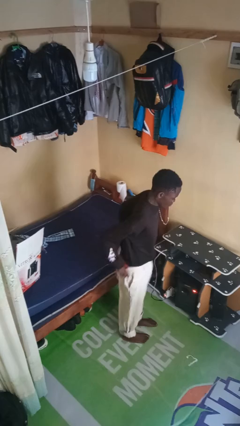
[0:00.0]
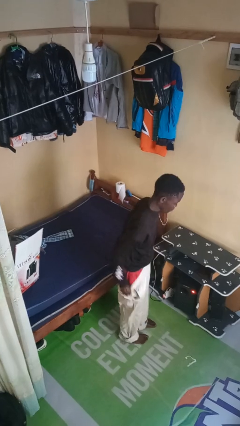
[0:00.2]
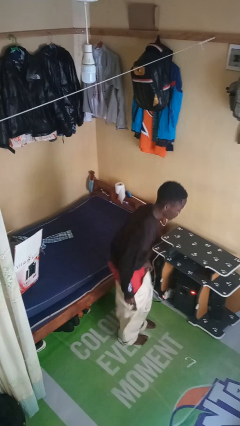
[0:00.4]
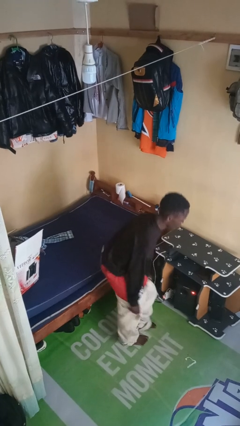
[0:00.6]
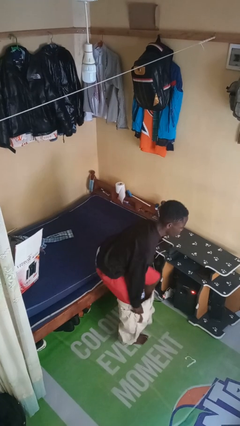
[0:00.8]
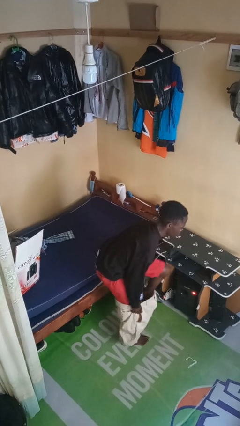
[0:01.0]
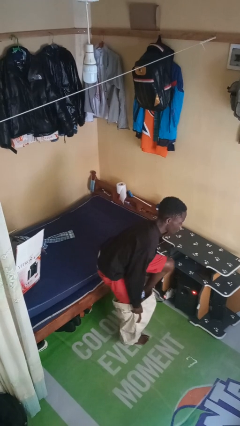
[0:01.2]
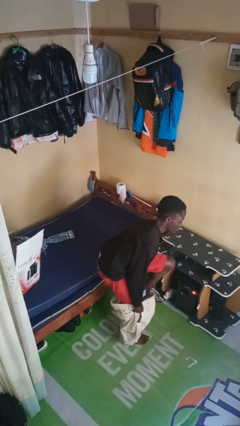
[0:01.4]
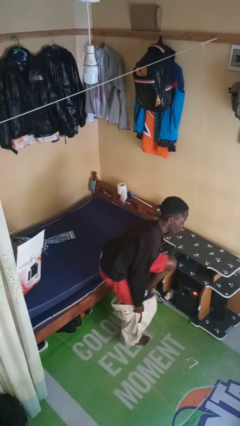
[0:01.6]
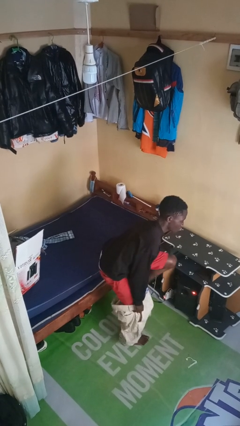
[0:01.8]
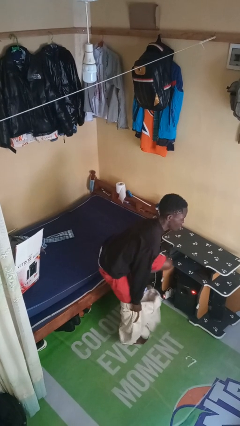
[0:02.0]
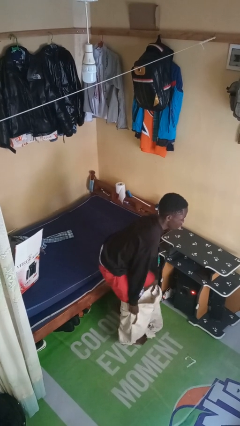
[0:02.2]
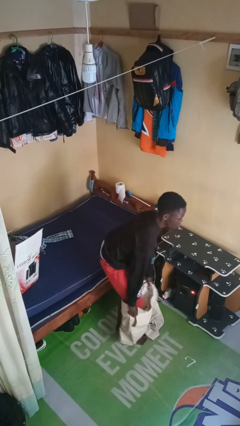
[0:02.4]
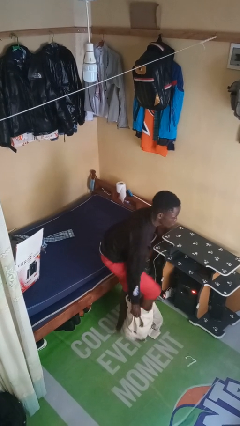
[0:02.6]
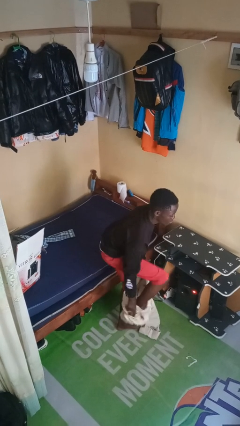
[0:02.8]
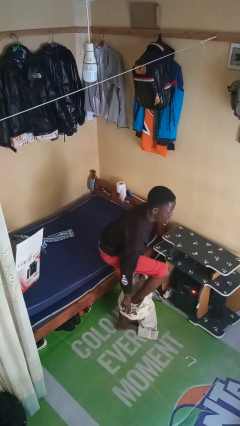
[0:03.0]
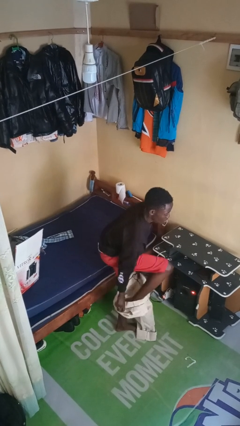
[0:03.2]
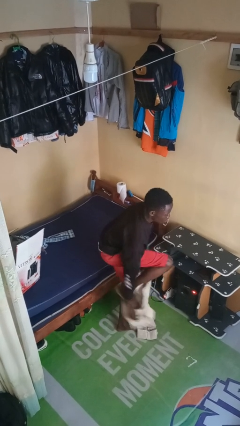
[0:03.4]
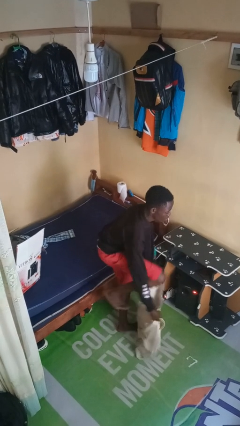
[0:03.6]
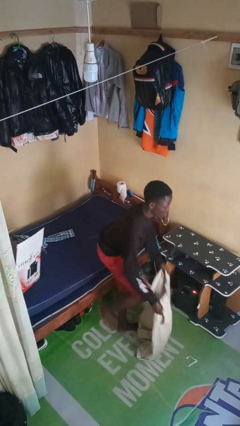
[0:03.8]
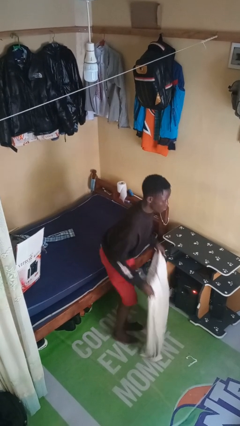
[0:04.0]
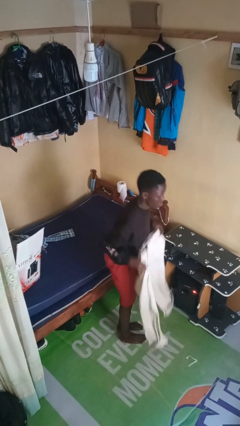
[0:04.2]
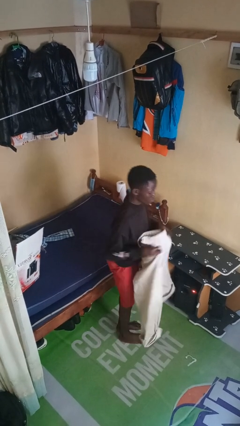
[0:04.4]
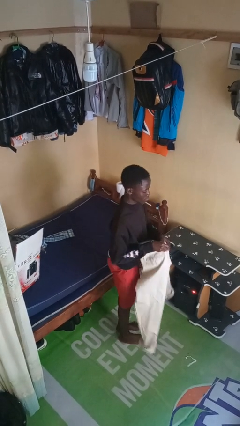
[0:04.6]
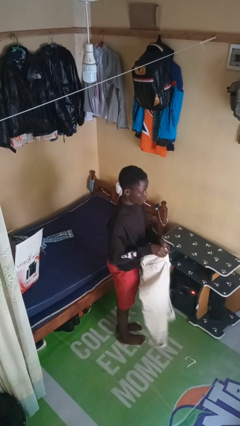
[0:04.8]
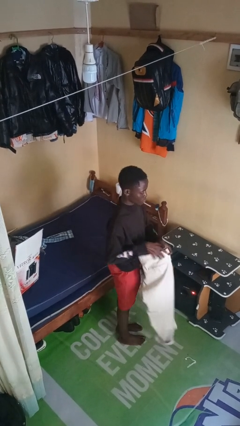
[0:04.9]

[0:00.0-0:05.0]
person takes off pants

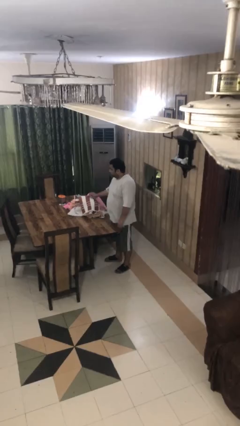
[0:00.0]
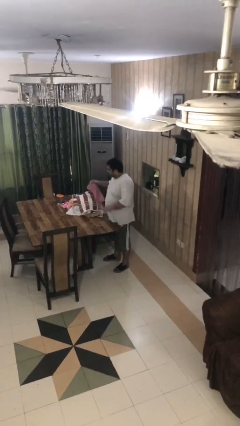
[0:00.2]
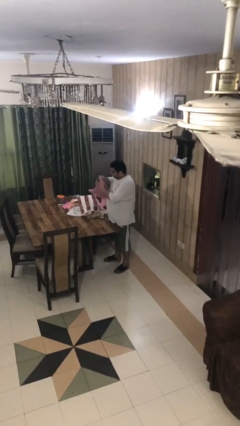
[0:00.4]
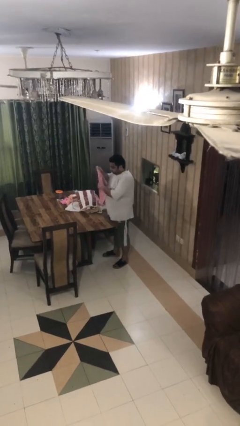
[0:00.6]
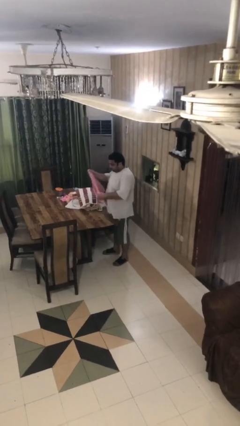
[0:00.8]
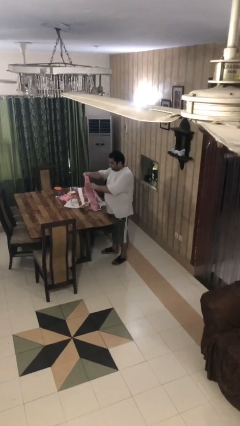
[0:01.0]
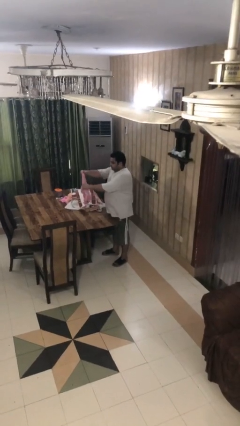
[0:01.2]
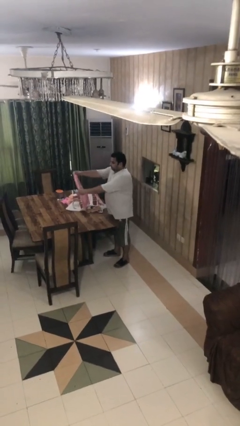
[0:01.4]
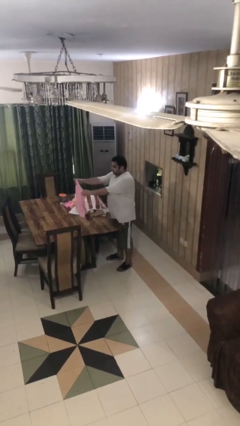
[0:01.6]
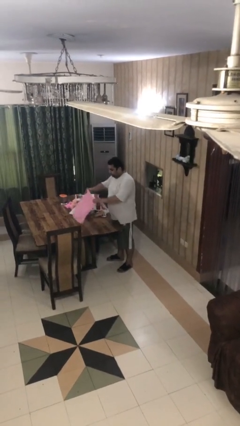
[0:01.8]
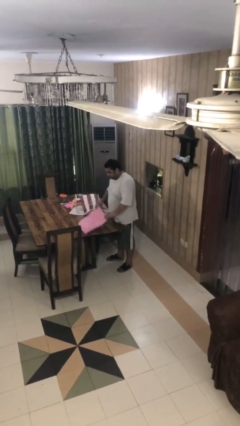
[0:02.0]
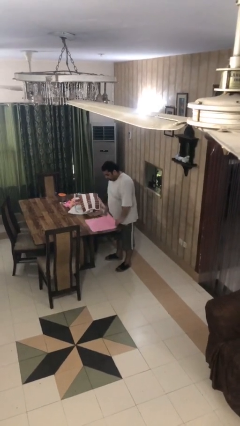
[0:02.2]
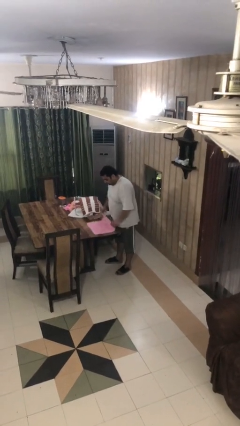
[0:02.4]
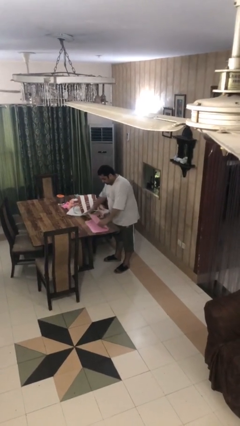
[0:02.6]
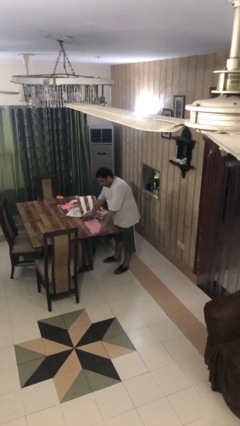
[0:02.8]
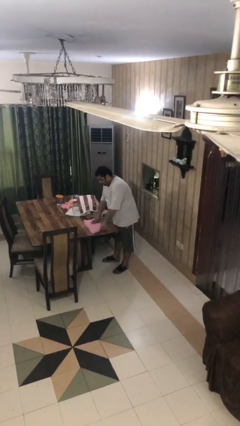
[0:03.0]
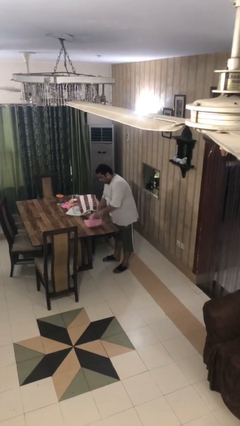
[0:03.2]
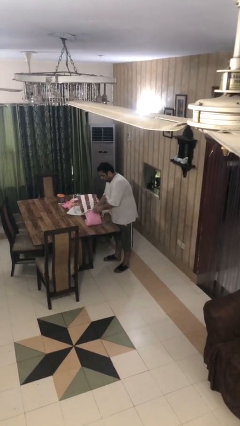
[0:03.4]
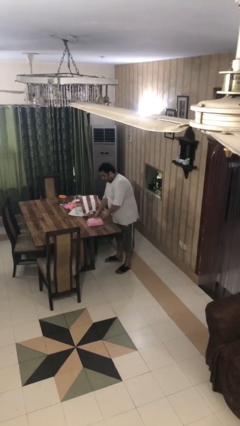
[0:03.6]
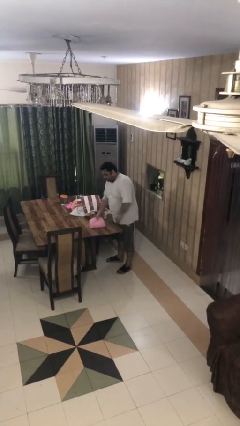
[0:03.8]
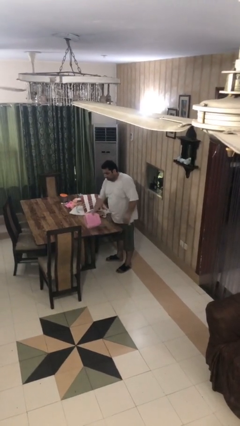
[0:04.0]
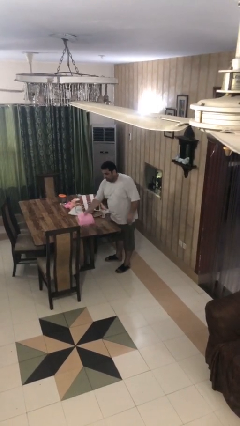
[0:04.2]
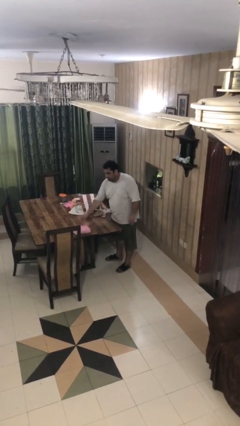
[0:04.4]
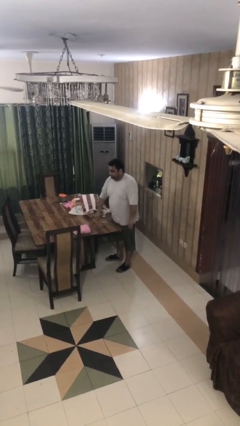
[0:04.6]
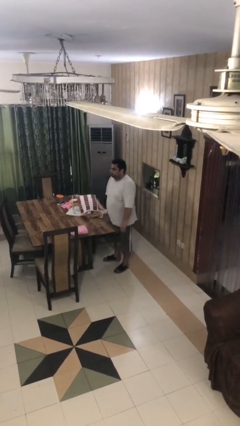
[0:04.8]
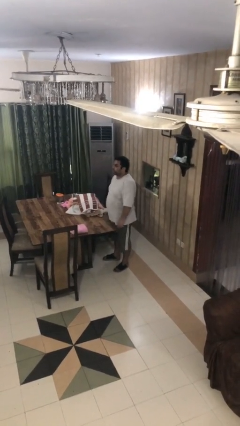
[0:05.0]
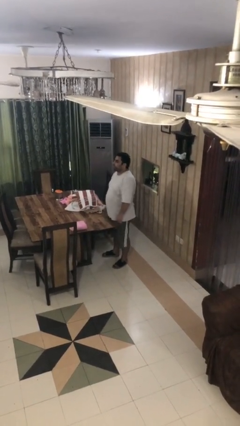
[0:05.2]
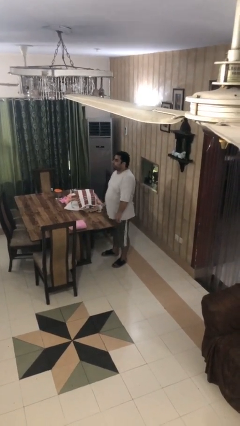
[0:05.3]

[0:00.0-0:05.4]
person folds towel

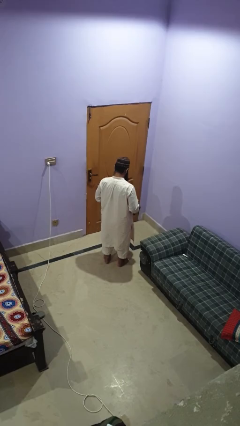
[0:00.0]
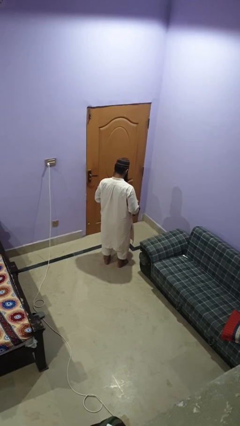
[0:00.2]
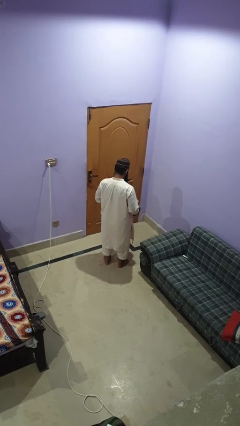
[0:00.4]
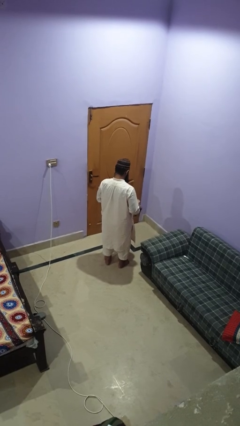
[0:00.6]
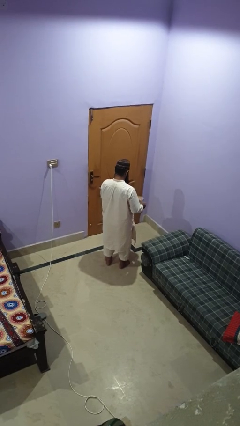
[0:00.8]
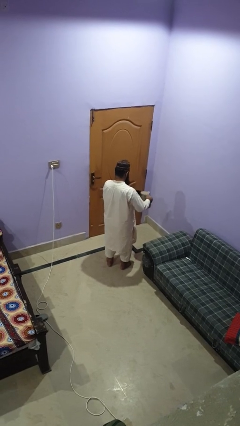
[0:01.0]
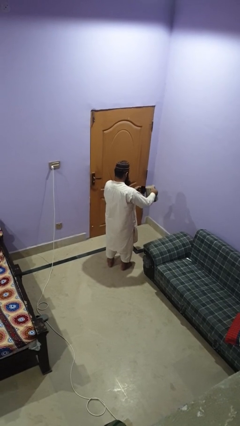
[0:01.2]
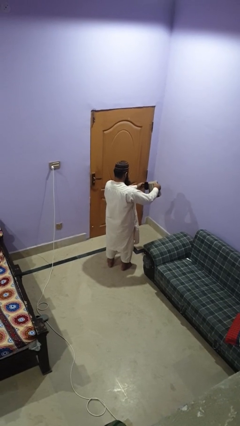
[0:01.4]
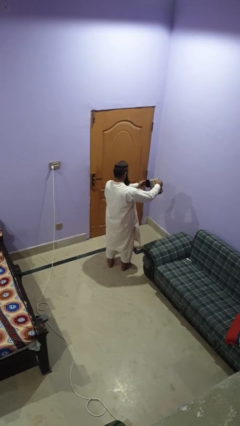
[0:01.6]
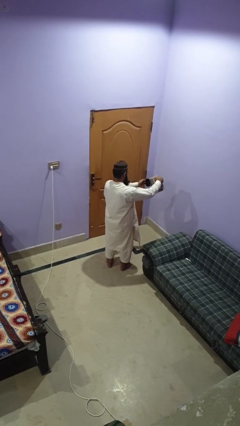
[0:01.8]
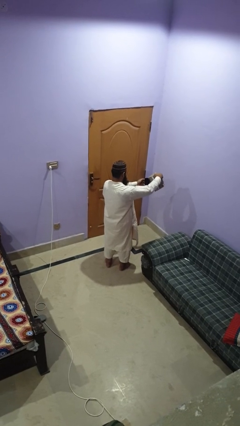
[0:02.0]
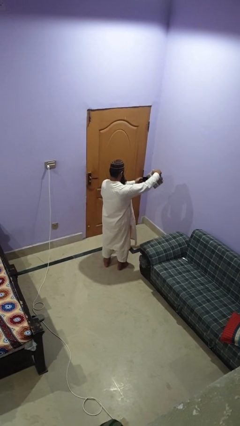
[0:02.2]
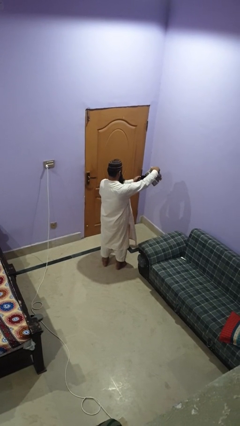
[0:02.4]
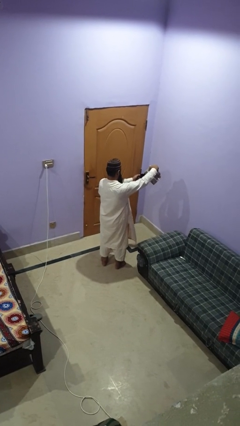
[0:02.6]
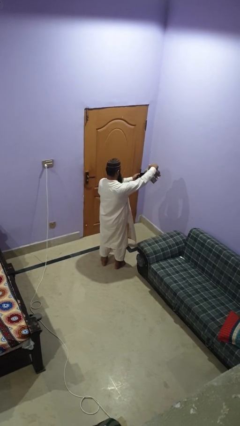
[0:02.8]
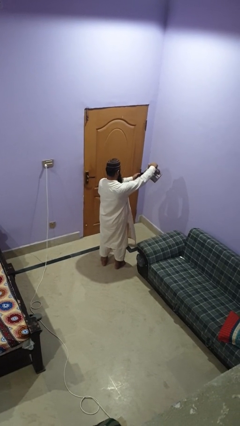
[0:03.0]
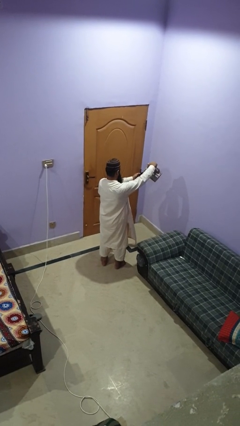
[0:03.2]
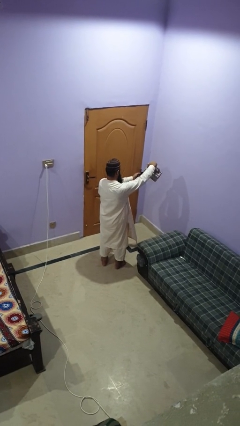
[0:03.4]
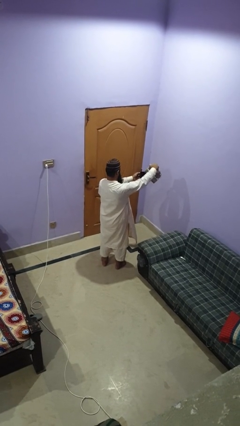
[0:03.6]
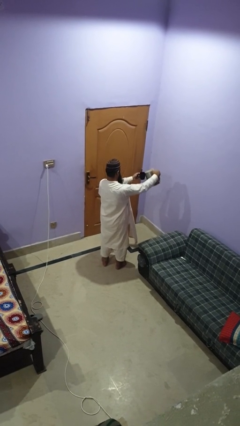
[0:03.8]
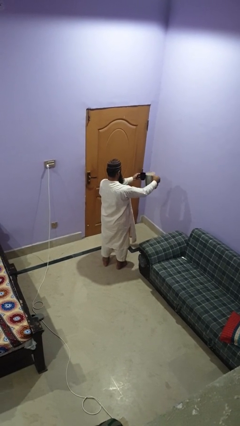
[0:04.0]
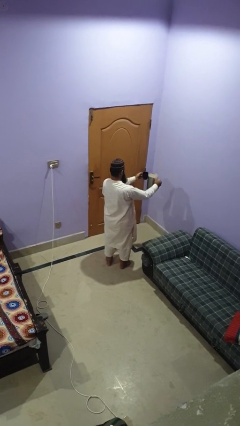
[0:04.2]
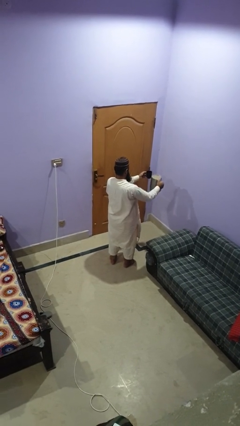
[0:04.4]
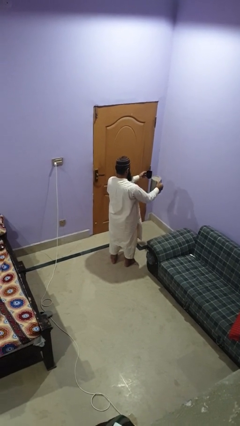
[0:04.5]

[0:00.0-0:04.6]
person pours coffee into mug

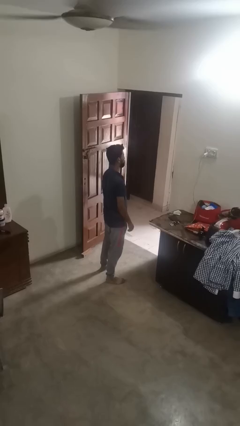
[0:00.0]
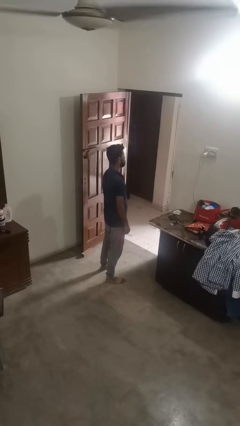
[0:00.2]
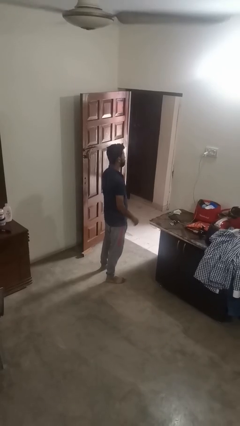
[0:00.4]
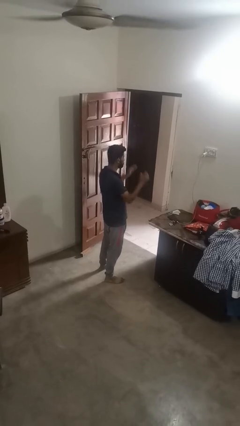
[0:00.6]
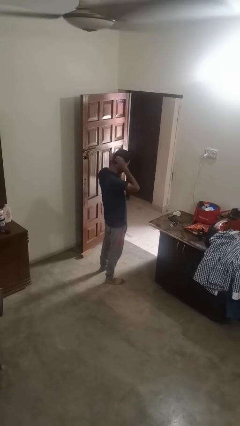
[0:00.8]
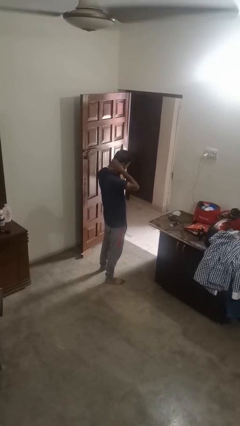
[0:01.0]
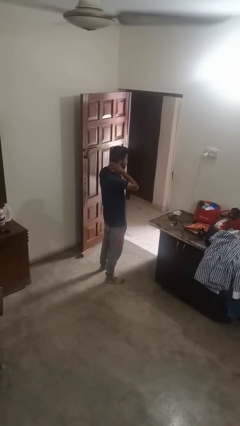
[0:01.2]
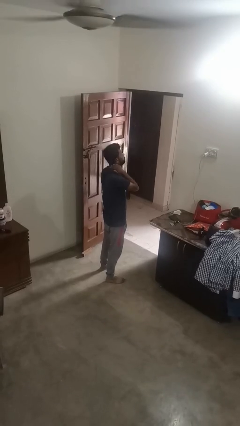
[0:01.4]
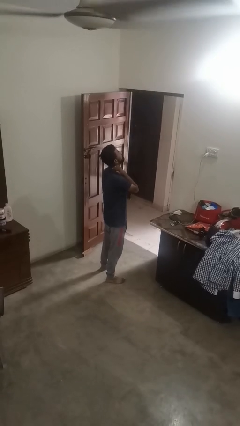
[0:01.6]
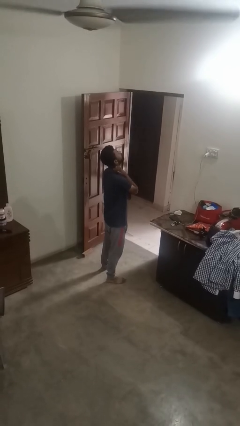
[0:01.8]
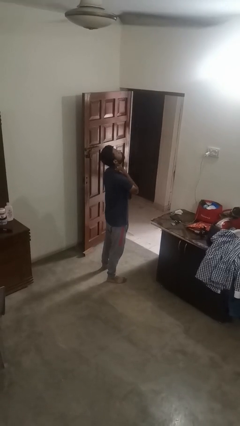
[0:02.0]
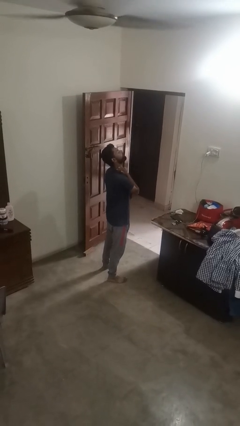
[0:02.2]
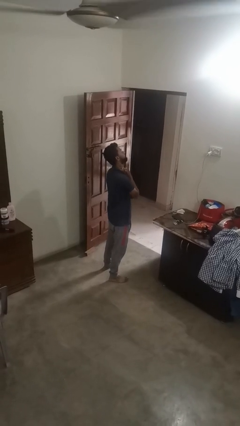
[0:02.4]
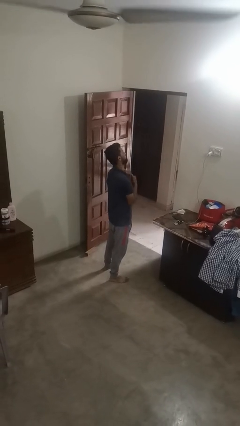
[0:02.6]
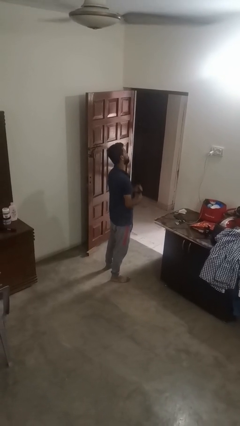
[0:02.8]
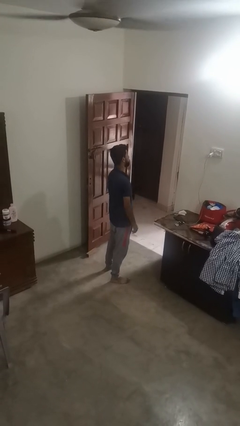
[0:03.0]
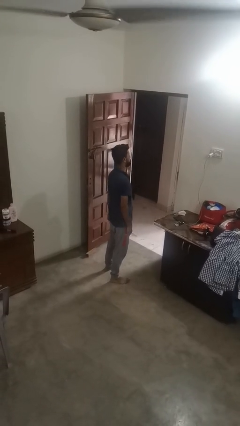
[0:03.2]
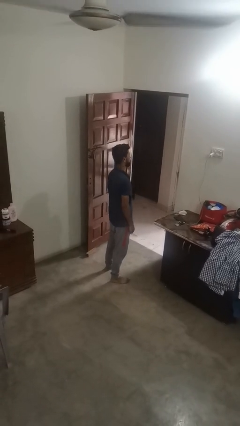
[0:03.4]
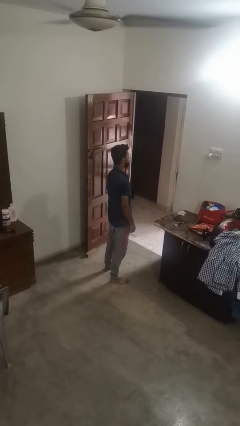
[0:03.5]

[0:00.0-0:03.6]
person rubs neck
